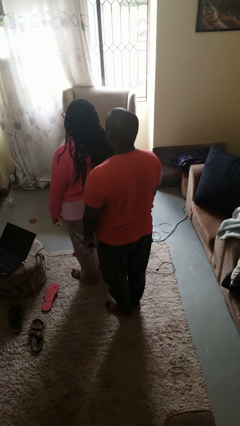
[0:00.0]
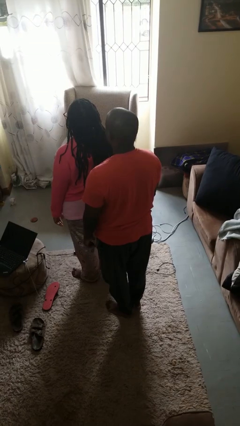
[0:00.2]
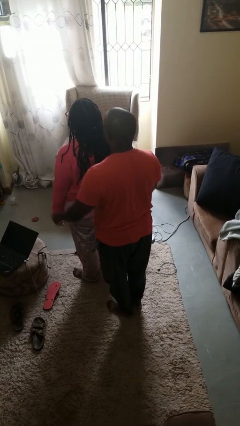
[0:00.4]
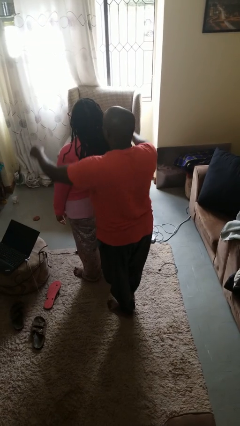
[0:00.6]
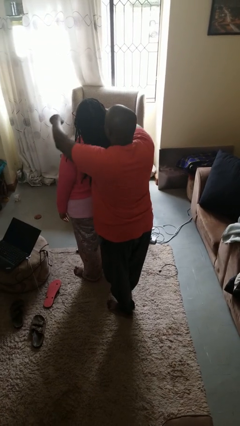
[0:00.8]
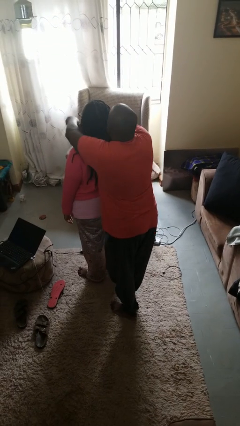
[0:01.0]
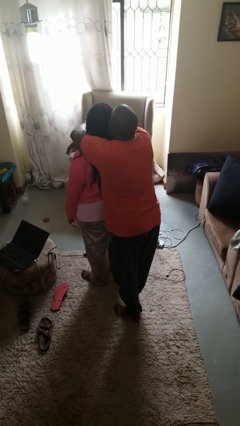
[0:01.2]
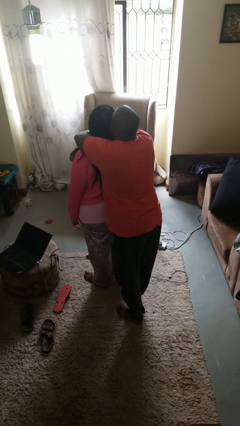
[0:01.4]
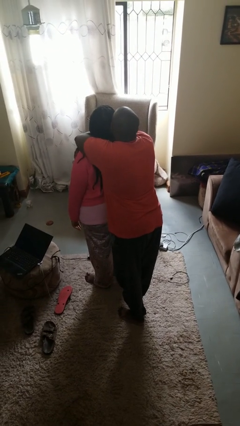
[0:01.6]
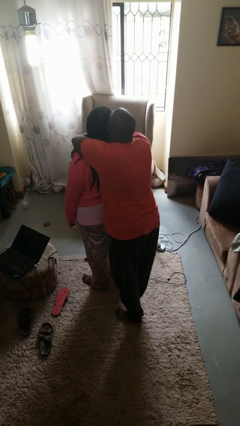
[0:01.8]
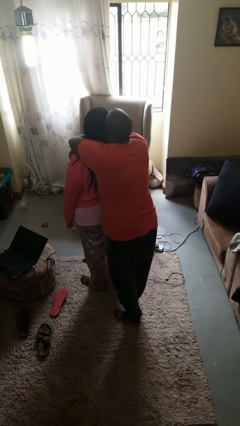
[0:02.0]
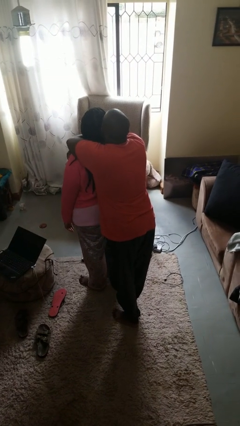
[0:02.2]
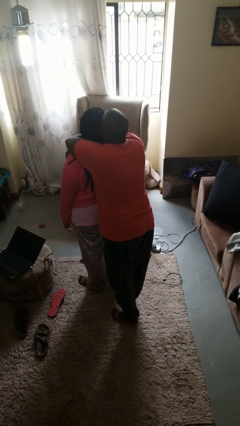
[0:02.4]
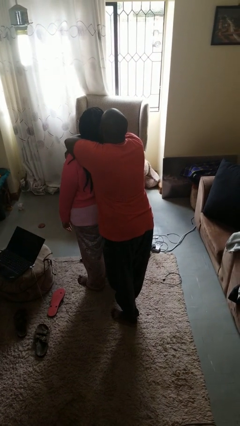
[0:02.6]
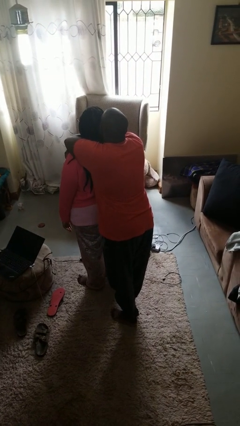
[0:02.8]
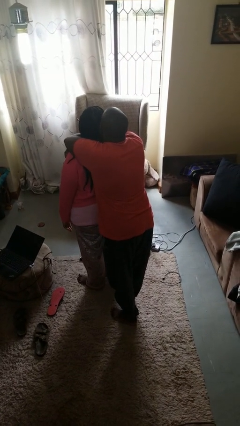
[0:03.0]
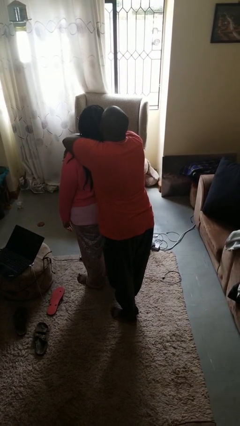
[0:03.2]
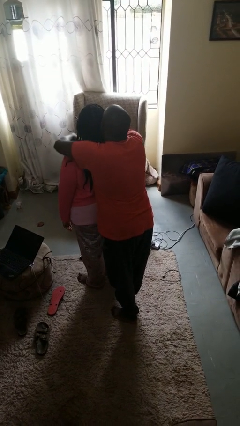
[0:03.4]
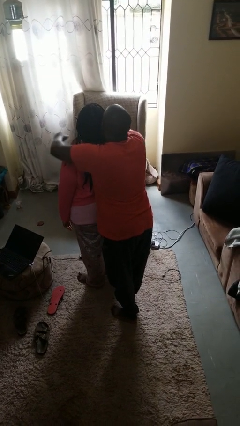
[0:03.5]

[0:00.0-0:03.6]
person hugs person from behind

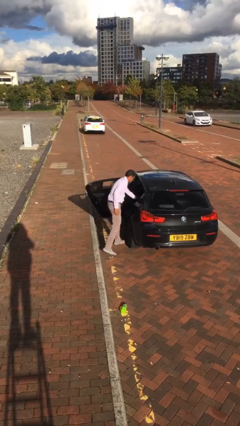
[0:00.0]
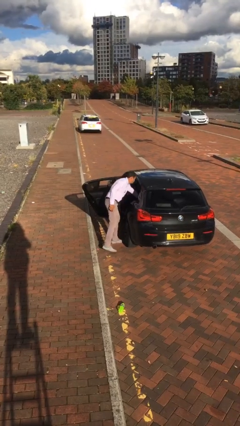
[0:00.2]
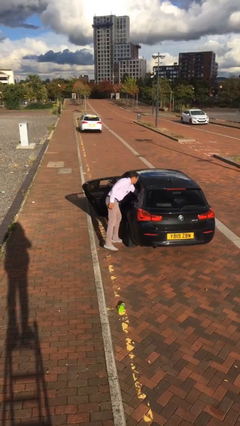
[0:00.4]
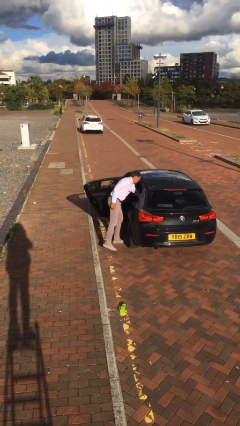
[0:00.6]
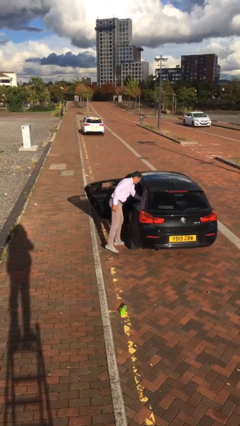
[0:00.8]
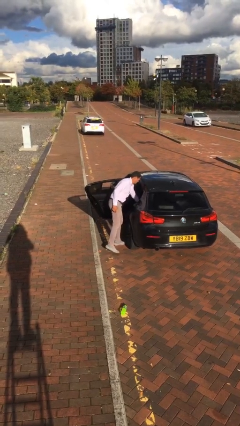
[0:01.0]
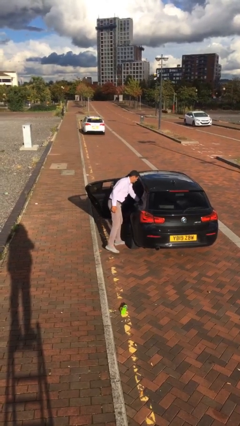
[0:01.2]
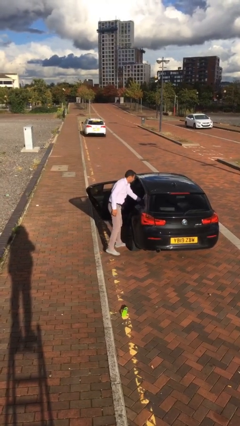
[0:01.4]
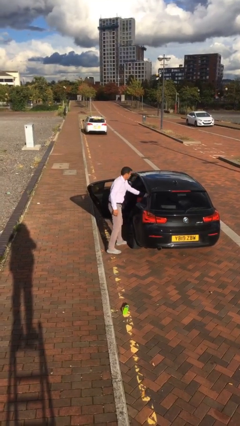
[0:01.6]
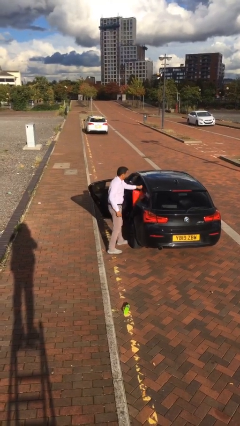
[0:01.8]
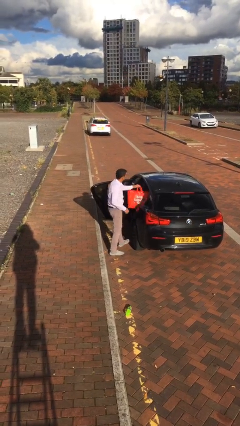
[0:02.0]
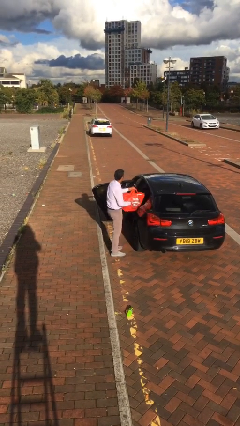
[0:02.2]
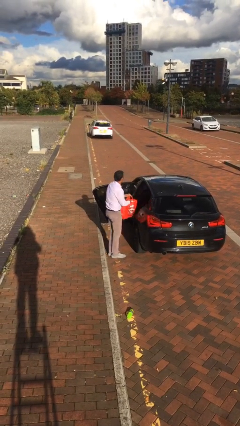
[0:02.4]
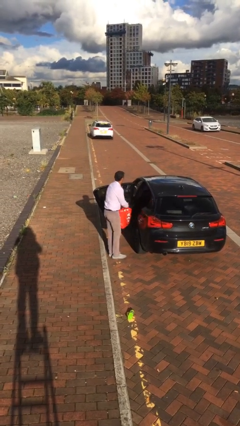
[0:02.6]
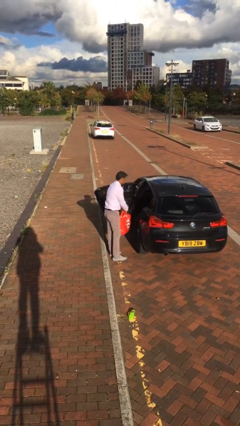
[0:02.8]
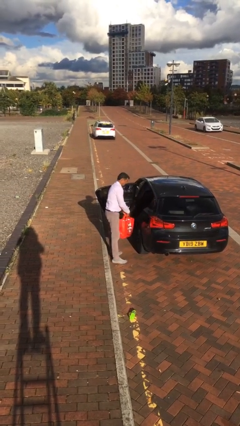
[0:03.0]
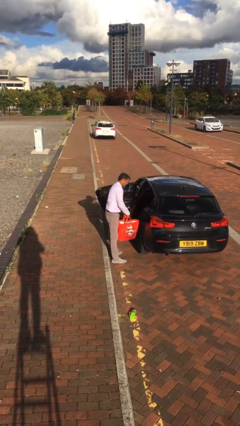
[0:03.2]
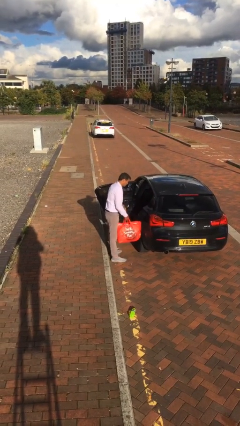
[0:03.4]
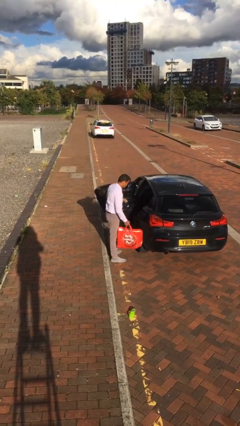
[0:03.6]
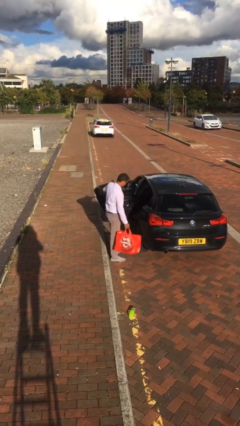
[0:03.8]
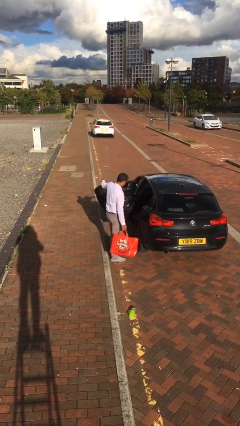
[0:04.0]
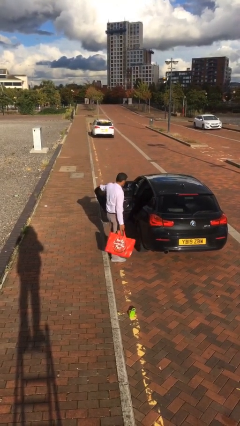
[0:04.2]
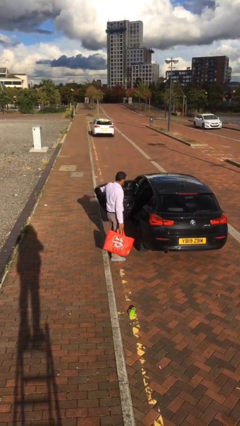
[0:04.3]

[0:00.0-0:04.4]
person unloads car

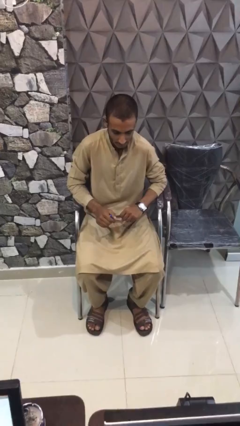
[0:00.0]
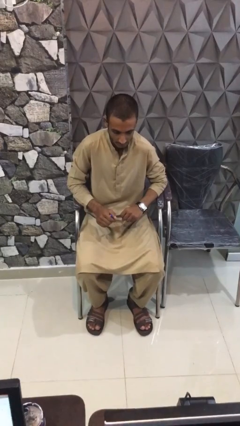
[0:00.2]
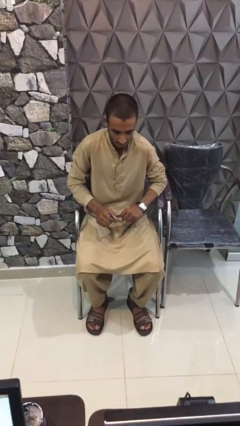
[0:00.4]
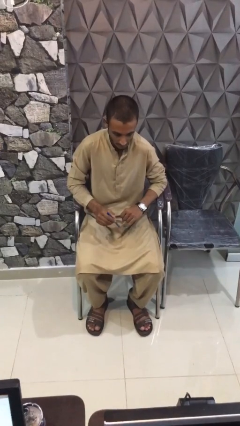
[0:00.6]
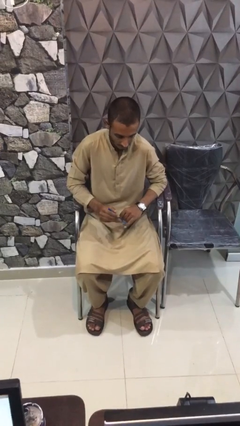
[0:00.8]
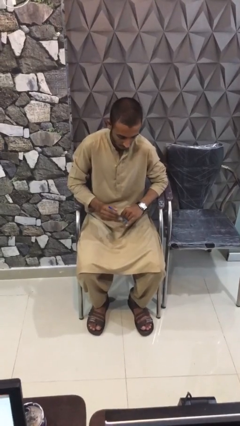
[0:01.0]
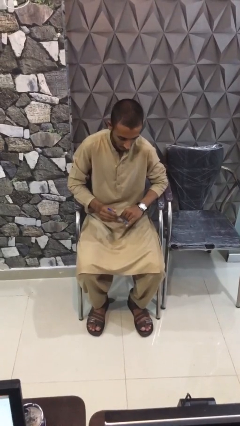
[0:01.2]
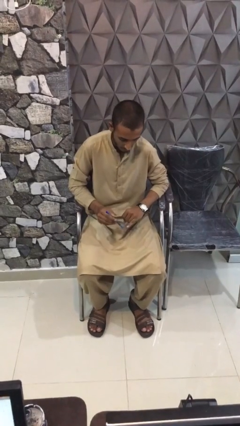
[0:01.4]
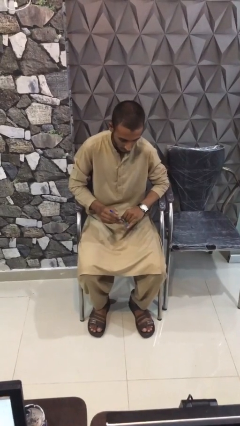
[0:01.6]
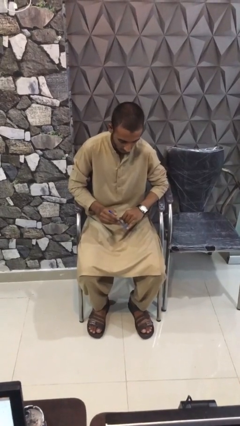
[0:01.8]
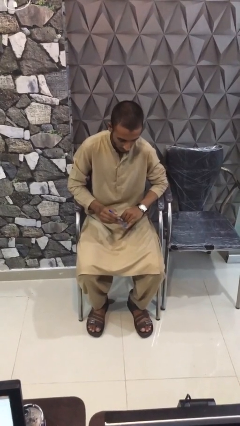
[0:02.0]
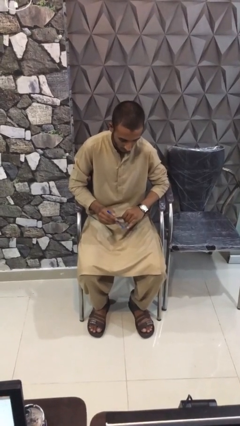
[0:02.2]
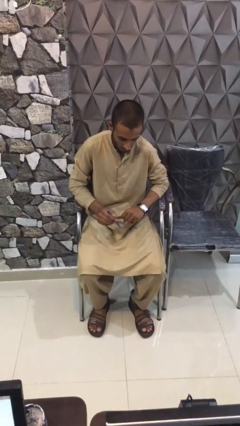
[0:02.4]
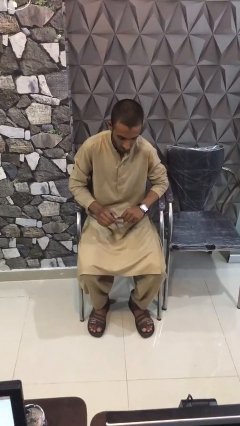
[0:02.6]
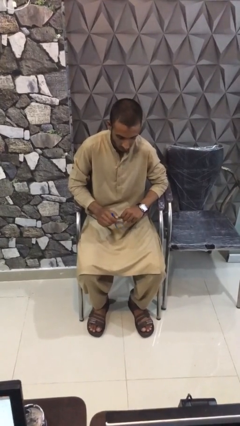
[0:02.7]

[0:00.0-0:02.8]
person paints fingernails

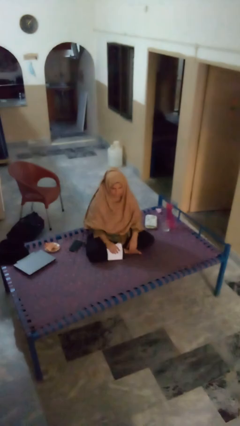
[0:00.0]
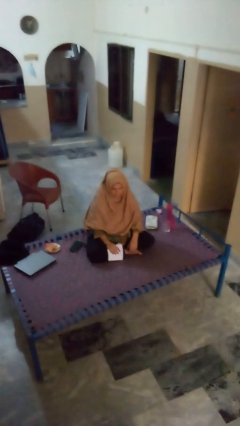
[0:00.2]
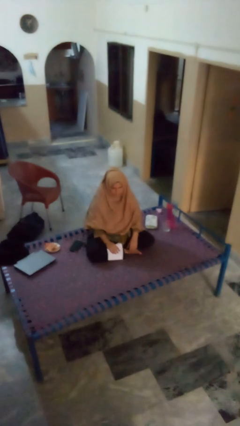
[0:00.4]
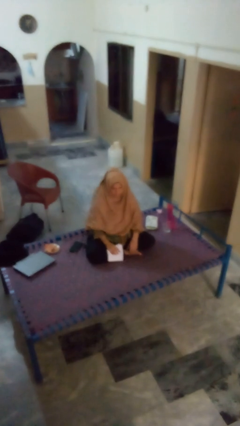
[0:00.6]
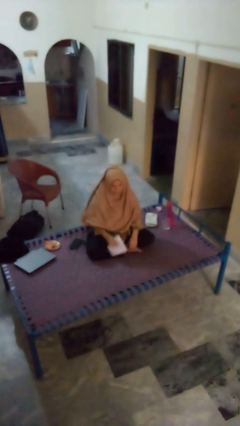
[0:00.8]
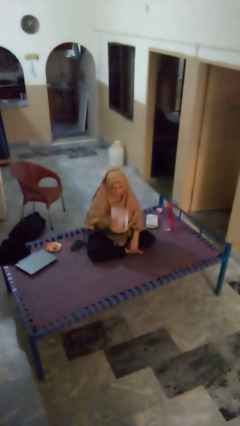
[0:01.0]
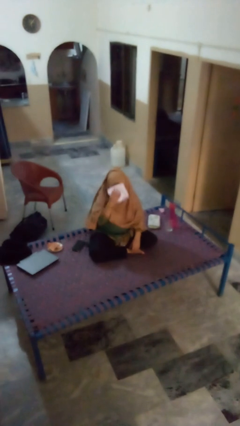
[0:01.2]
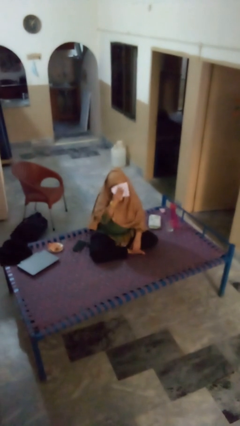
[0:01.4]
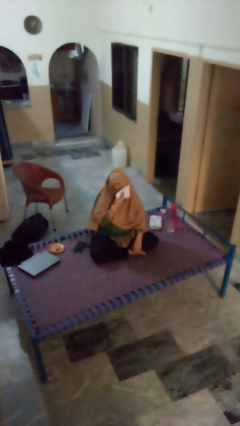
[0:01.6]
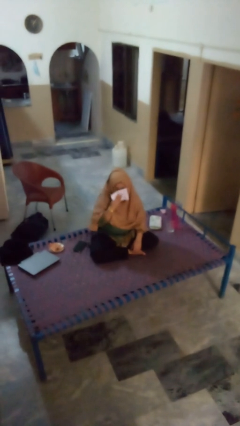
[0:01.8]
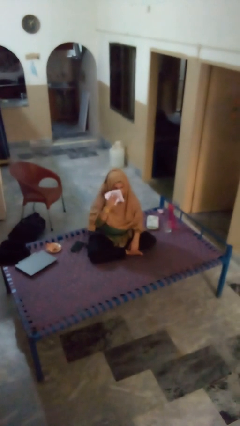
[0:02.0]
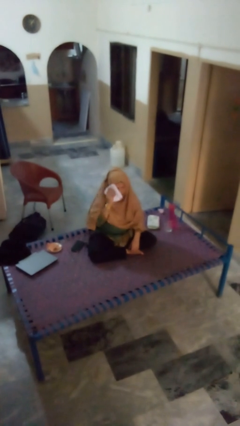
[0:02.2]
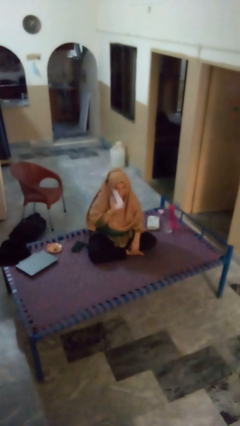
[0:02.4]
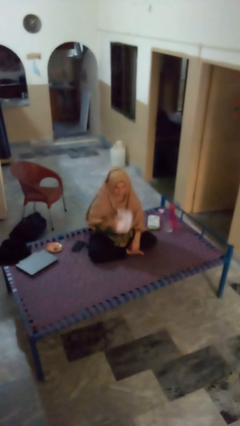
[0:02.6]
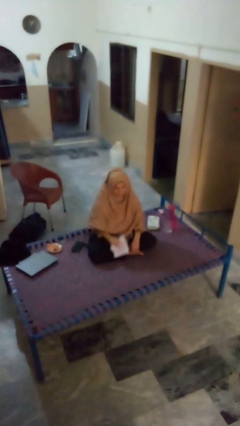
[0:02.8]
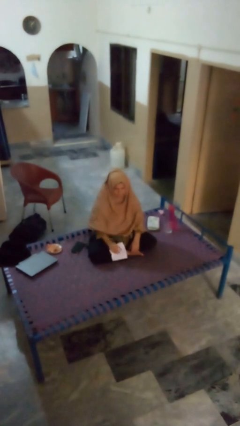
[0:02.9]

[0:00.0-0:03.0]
person wipes mouth with napkin

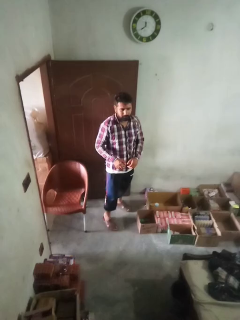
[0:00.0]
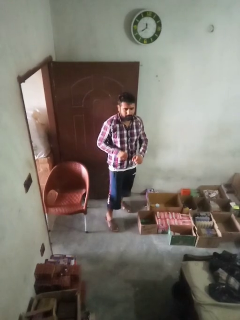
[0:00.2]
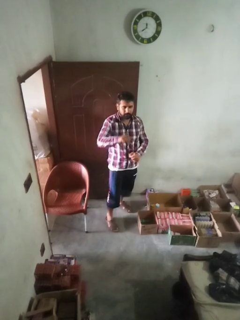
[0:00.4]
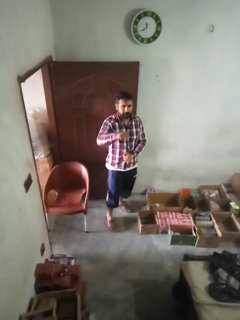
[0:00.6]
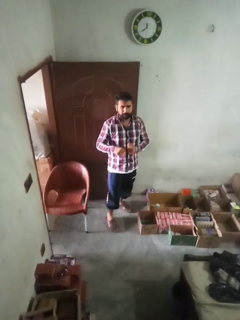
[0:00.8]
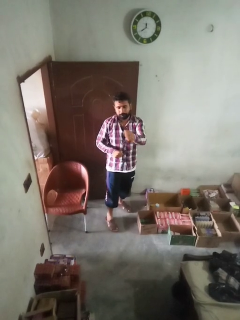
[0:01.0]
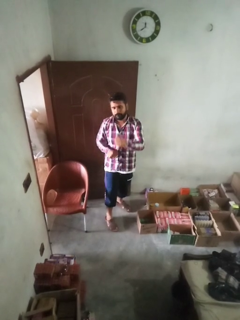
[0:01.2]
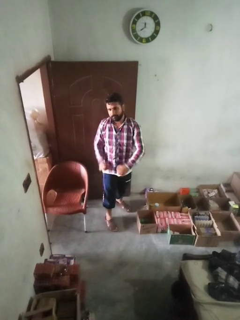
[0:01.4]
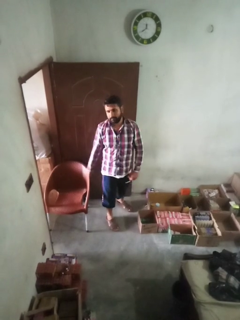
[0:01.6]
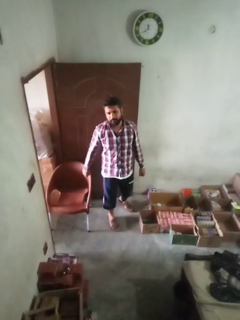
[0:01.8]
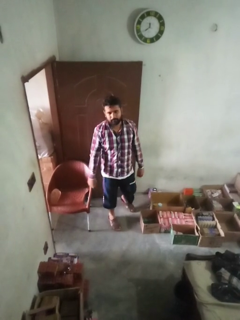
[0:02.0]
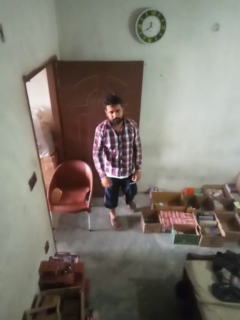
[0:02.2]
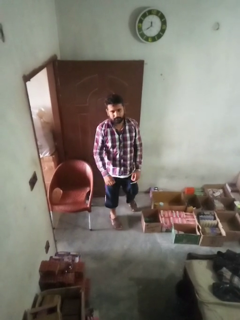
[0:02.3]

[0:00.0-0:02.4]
person karate chop

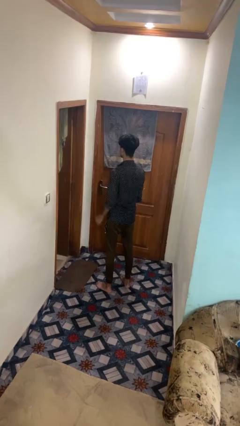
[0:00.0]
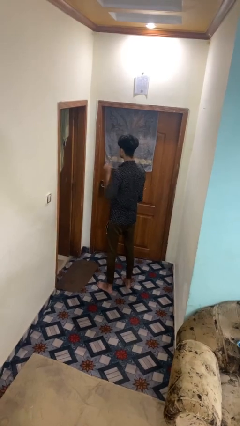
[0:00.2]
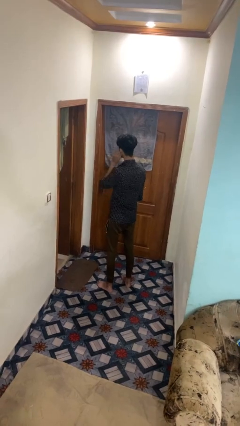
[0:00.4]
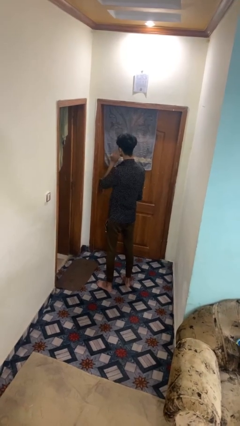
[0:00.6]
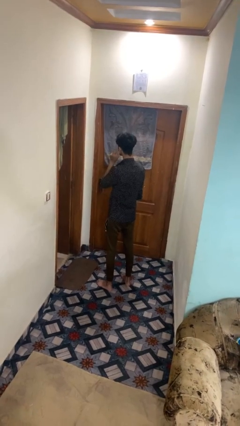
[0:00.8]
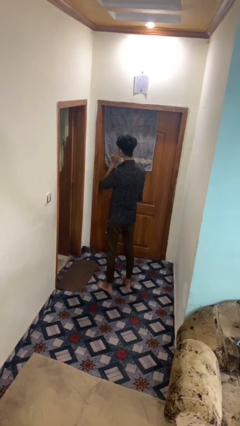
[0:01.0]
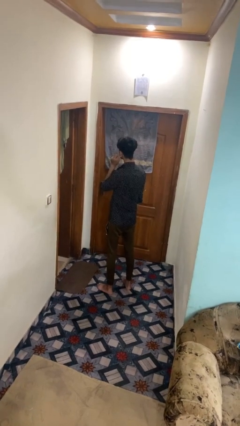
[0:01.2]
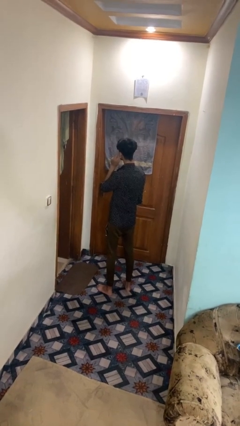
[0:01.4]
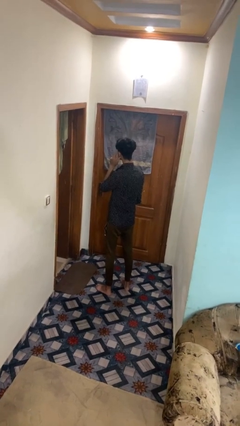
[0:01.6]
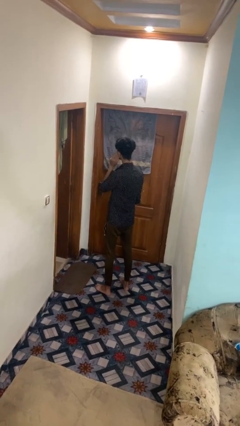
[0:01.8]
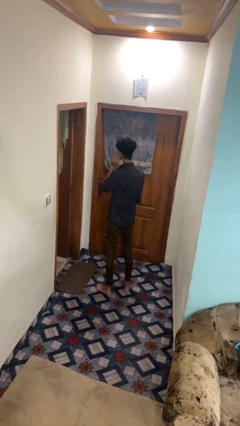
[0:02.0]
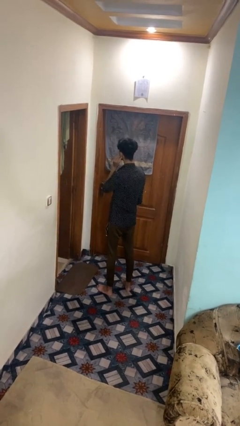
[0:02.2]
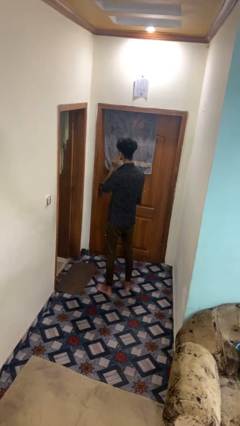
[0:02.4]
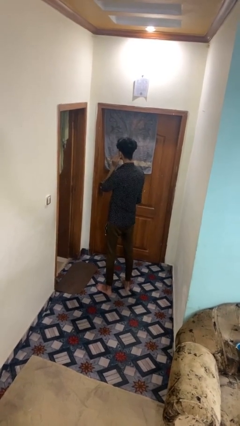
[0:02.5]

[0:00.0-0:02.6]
person touches earlobe
